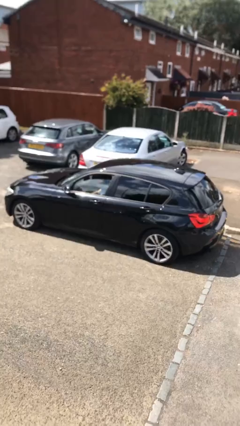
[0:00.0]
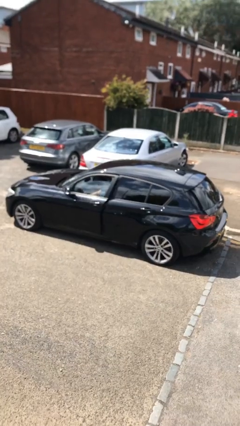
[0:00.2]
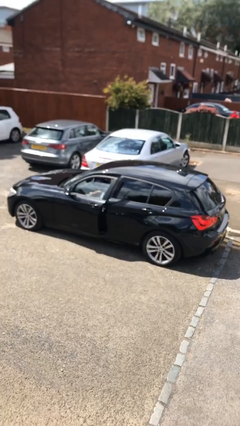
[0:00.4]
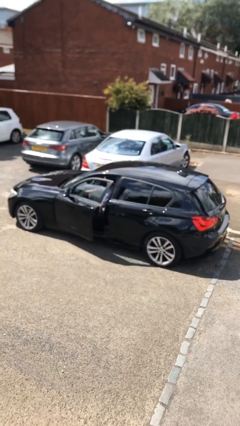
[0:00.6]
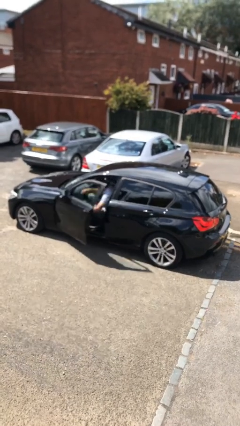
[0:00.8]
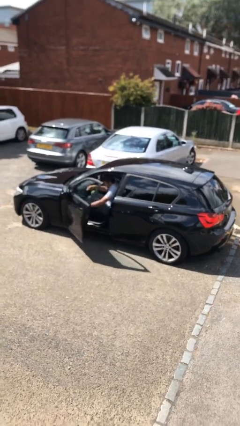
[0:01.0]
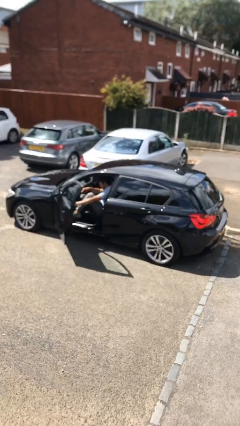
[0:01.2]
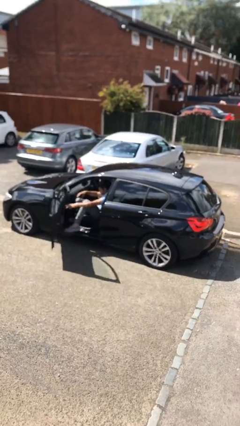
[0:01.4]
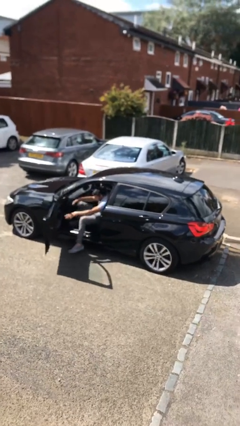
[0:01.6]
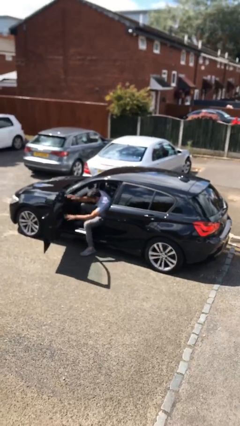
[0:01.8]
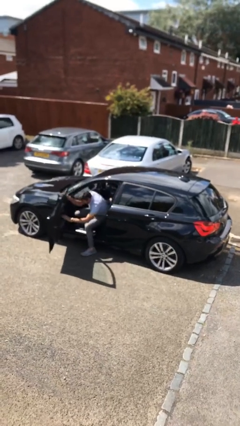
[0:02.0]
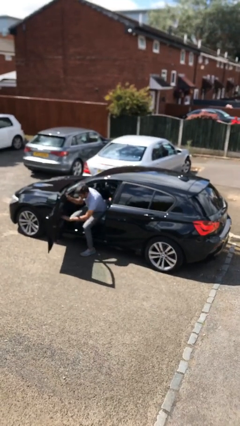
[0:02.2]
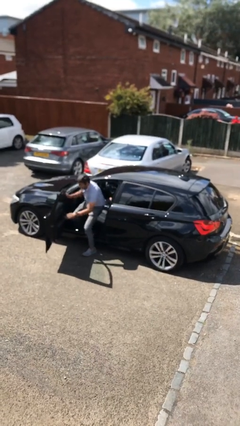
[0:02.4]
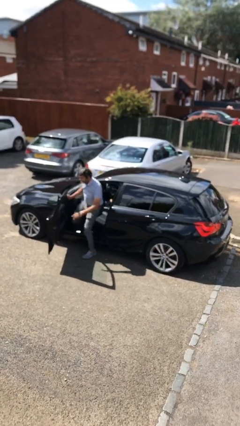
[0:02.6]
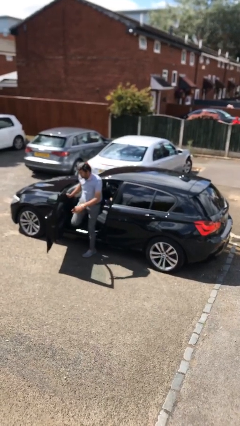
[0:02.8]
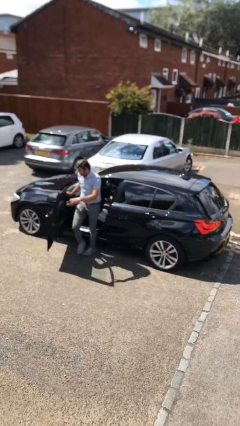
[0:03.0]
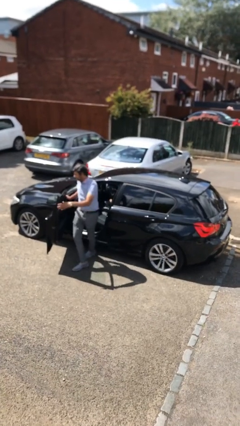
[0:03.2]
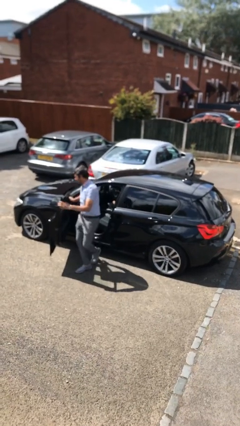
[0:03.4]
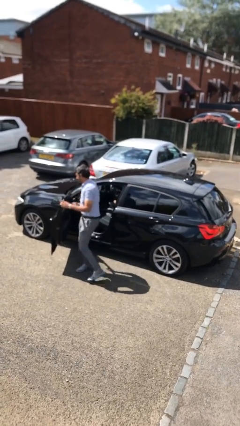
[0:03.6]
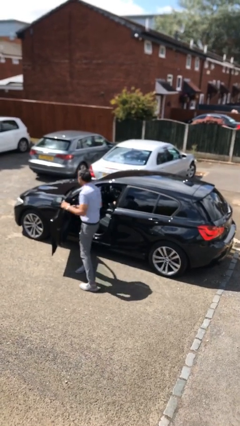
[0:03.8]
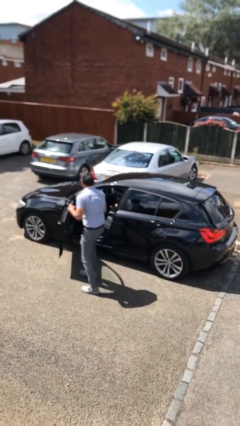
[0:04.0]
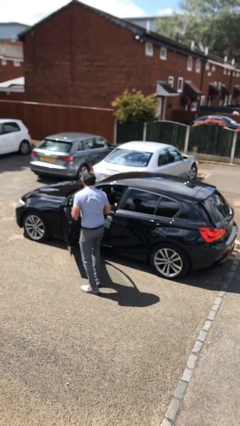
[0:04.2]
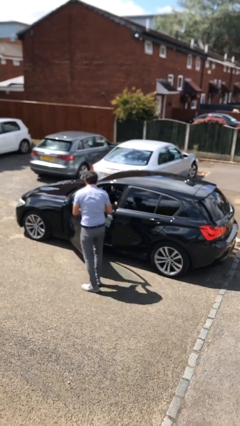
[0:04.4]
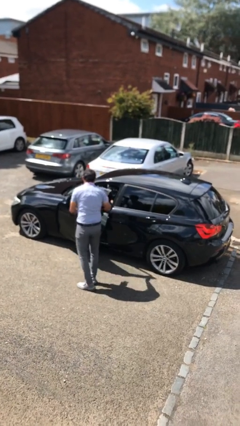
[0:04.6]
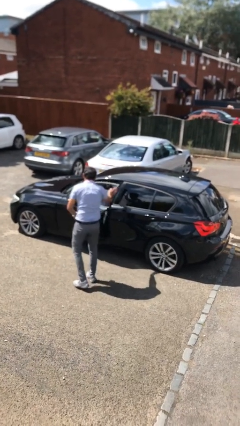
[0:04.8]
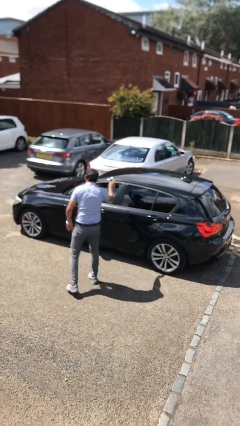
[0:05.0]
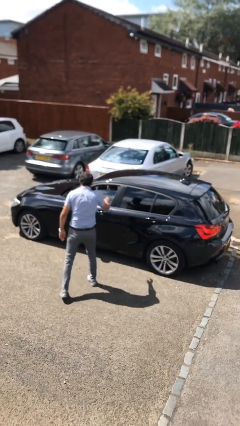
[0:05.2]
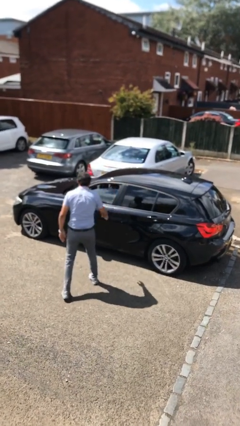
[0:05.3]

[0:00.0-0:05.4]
car drops off person

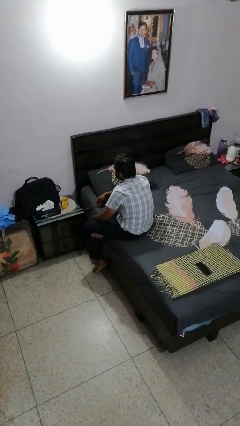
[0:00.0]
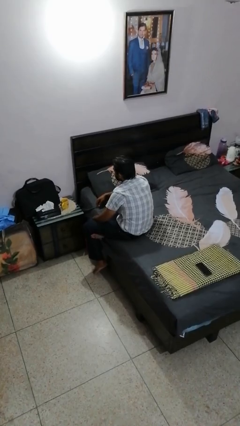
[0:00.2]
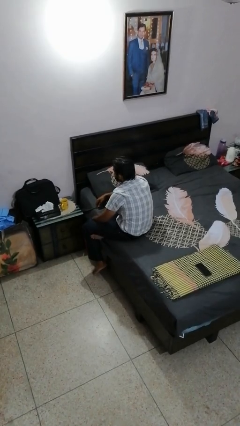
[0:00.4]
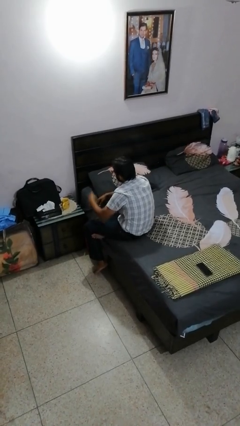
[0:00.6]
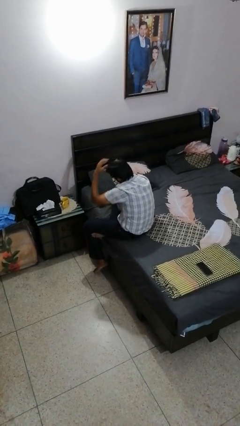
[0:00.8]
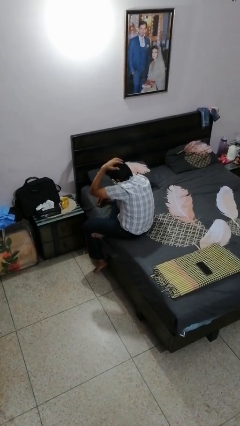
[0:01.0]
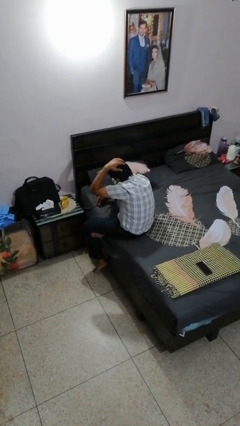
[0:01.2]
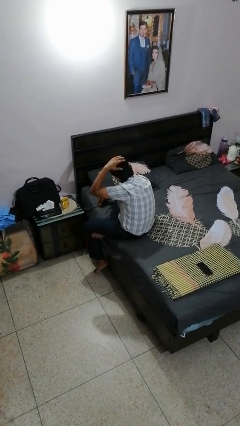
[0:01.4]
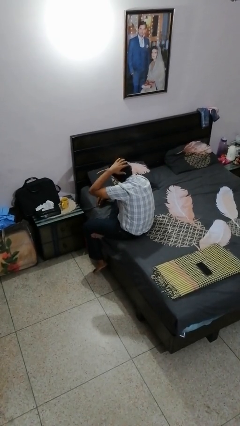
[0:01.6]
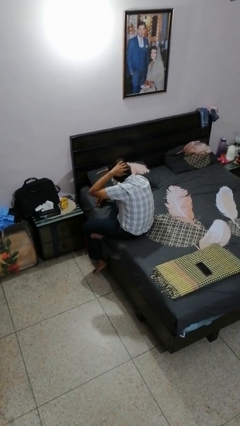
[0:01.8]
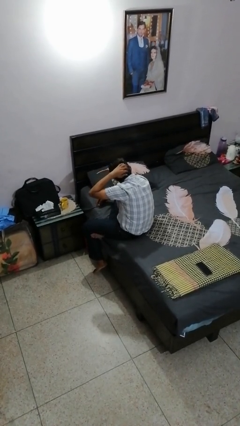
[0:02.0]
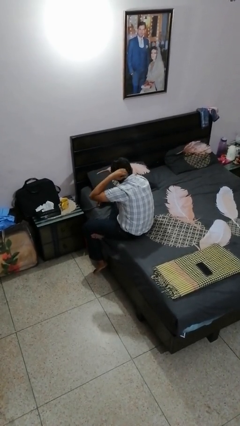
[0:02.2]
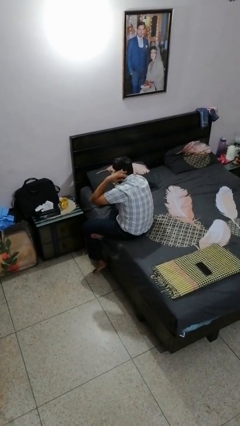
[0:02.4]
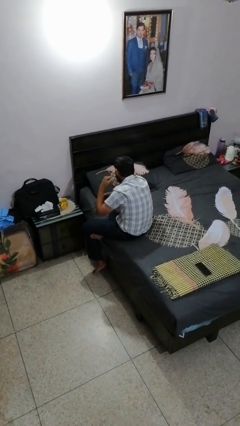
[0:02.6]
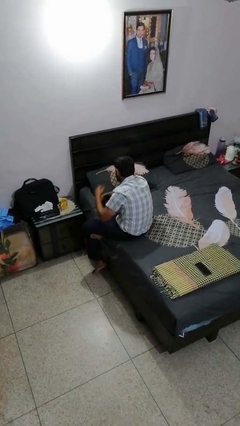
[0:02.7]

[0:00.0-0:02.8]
person strokes hair

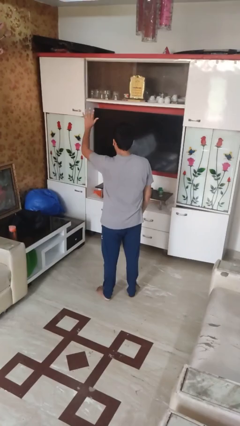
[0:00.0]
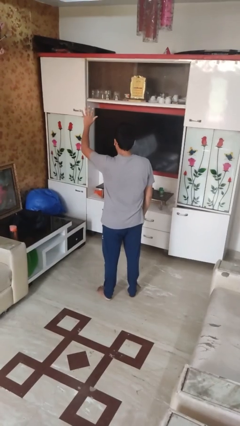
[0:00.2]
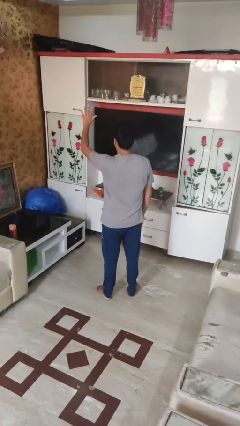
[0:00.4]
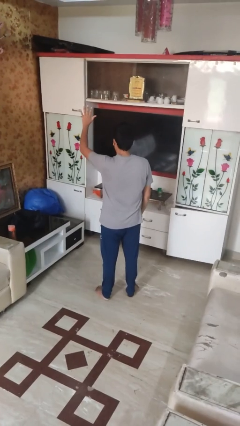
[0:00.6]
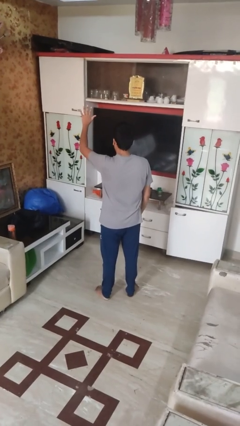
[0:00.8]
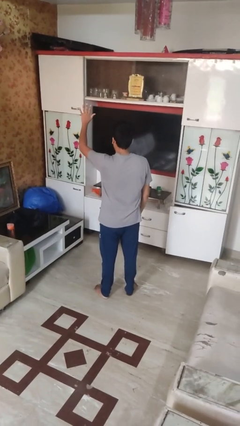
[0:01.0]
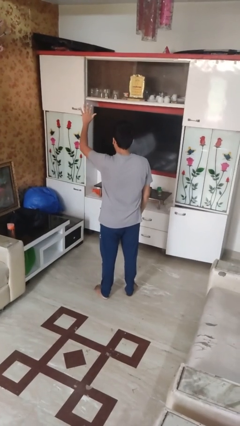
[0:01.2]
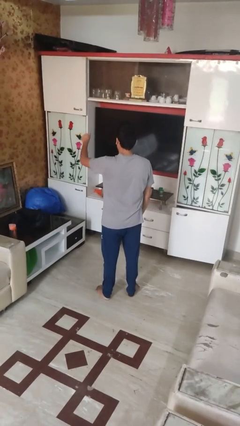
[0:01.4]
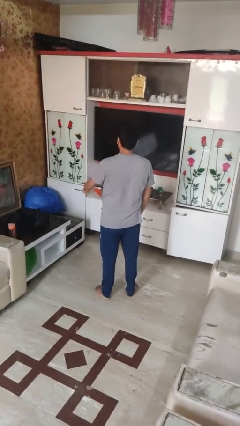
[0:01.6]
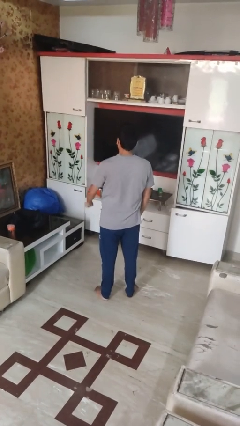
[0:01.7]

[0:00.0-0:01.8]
person gestures number five

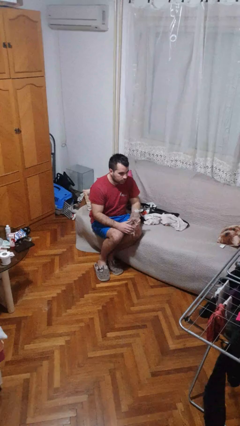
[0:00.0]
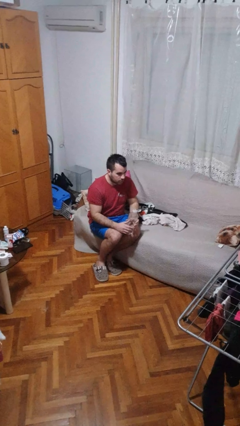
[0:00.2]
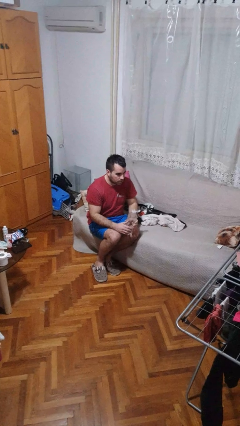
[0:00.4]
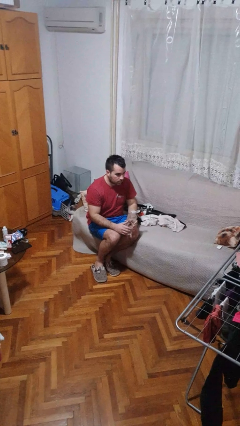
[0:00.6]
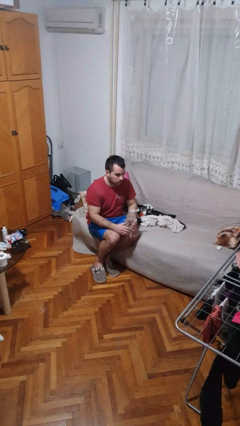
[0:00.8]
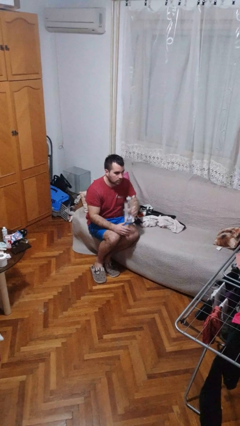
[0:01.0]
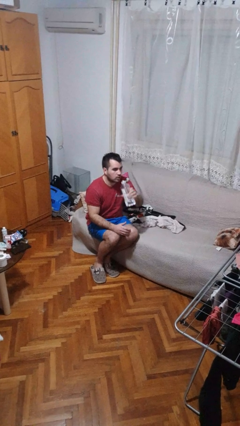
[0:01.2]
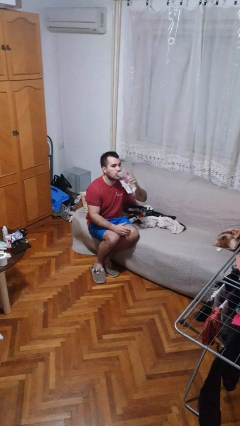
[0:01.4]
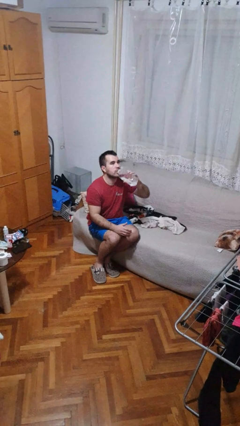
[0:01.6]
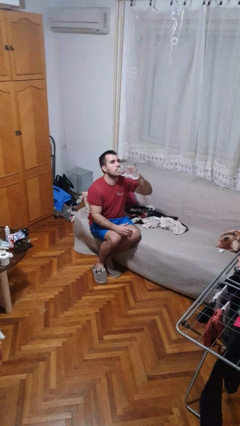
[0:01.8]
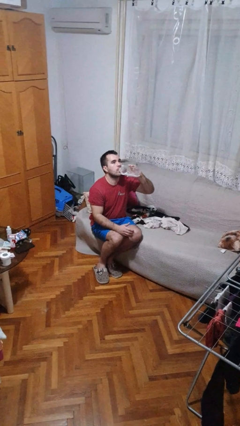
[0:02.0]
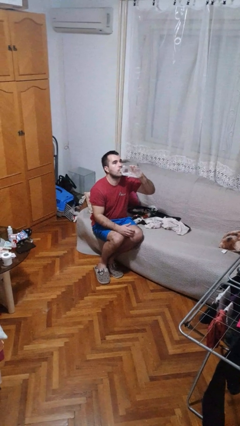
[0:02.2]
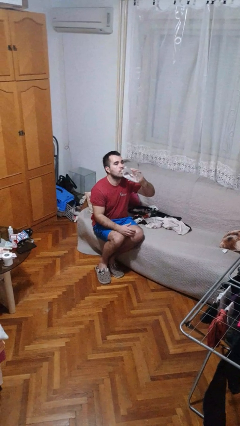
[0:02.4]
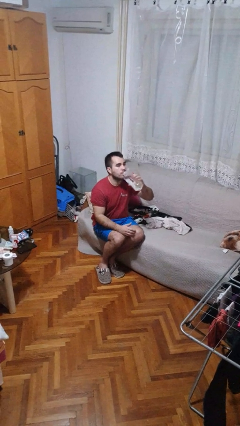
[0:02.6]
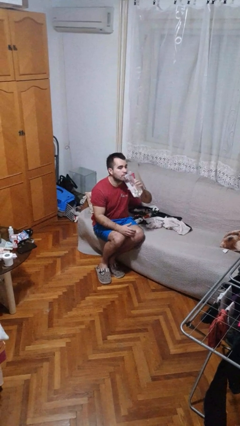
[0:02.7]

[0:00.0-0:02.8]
person drinks from bottle

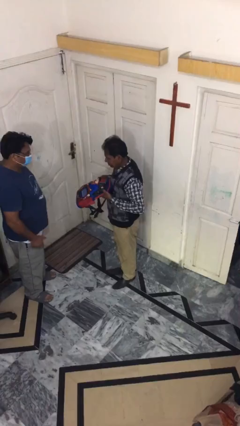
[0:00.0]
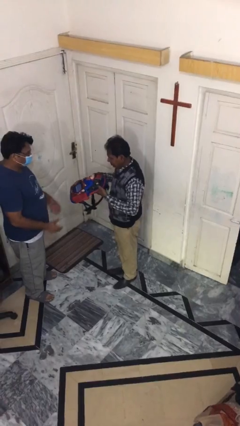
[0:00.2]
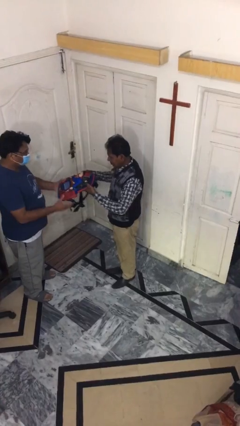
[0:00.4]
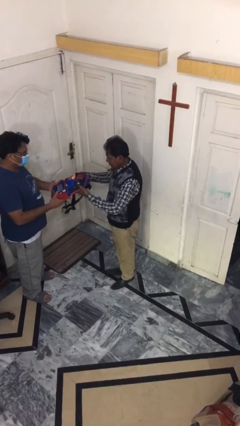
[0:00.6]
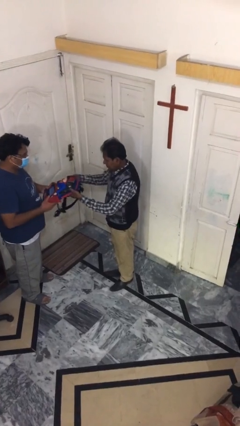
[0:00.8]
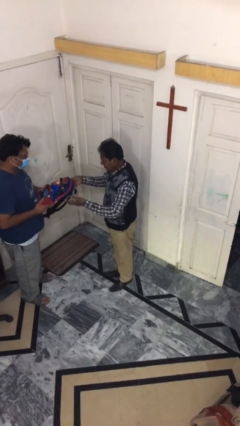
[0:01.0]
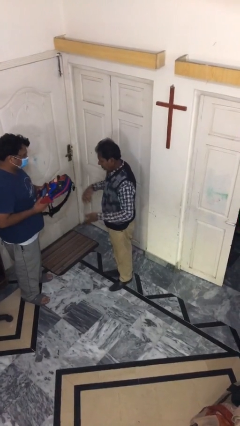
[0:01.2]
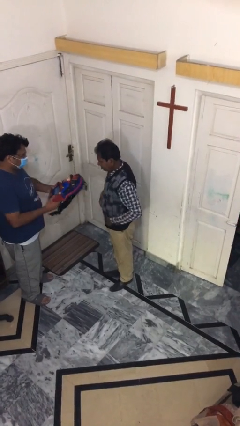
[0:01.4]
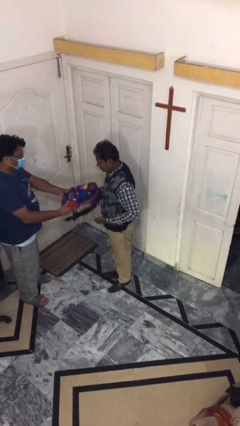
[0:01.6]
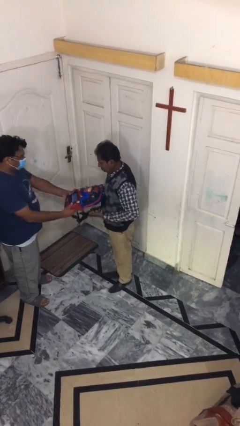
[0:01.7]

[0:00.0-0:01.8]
person transfers object to person

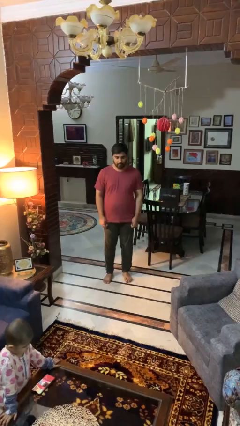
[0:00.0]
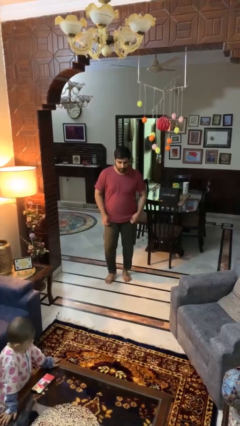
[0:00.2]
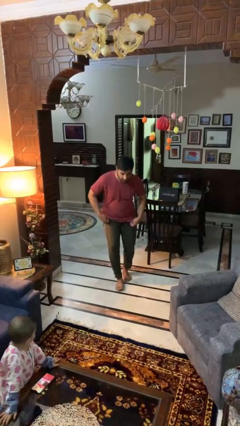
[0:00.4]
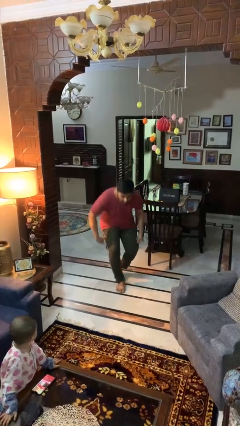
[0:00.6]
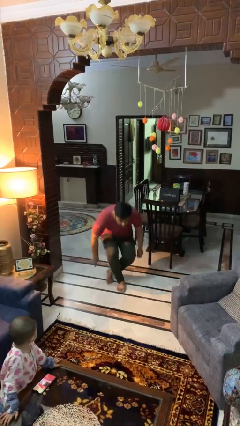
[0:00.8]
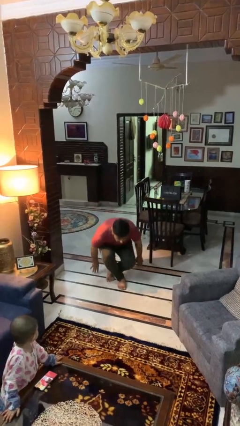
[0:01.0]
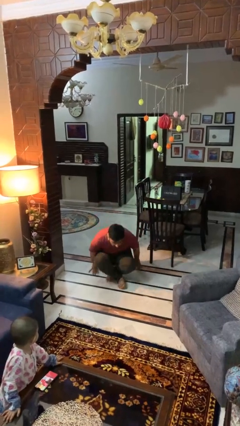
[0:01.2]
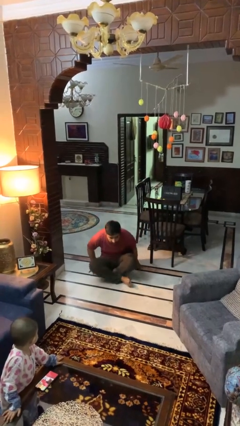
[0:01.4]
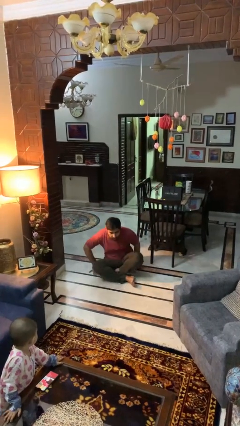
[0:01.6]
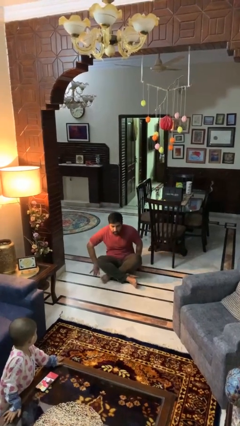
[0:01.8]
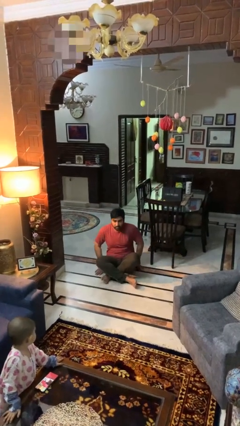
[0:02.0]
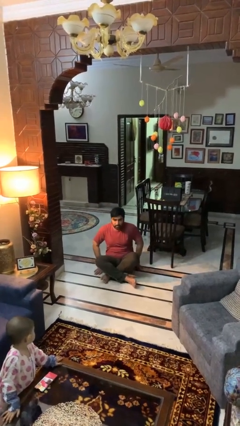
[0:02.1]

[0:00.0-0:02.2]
person sits crisscross

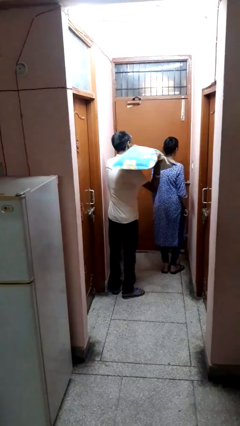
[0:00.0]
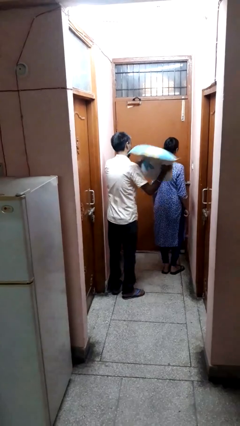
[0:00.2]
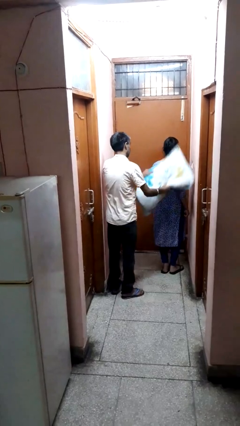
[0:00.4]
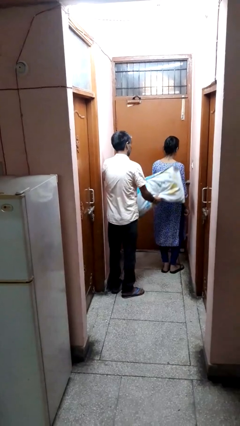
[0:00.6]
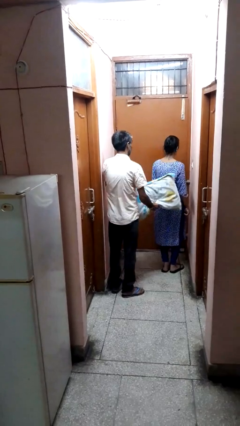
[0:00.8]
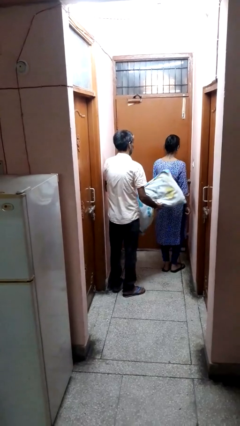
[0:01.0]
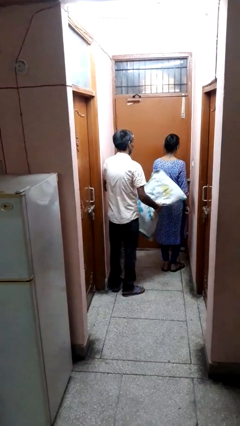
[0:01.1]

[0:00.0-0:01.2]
person hits person with pillow
